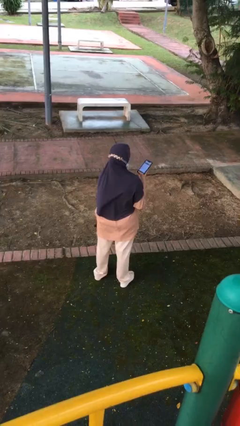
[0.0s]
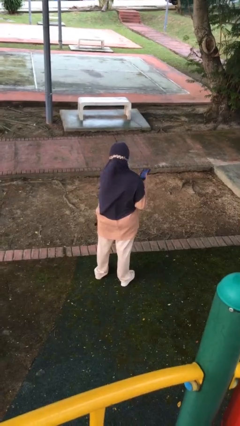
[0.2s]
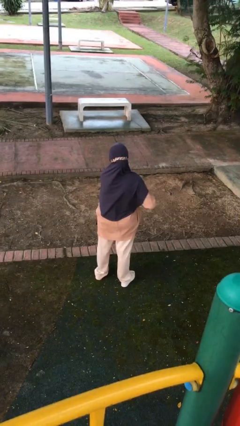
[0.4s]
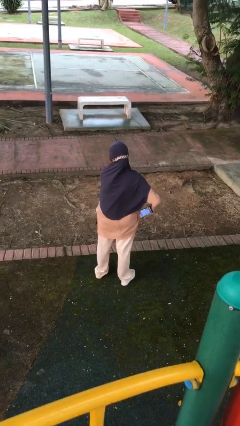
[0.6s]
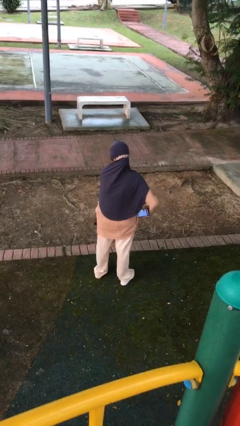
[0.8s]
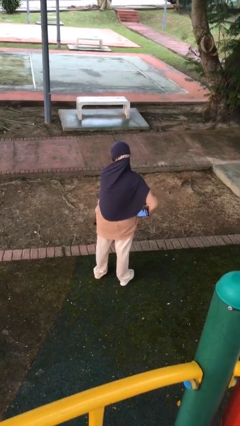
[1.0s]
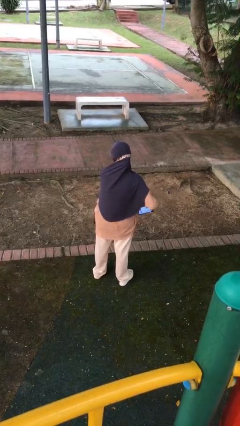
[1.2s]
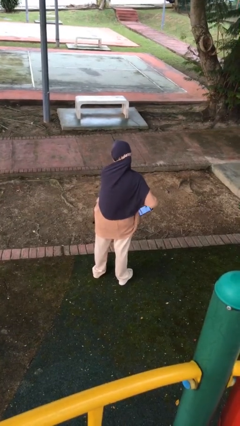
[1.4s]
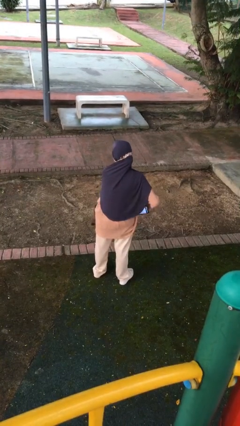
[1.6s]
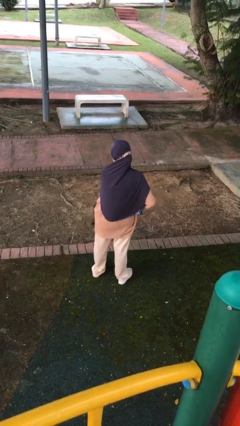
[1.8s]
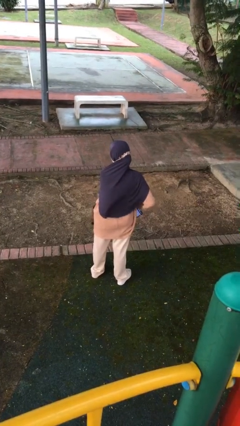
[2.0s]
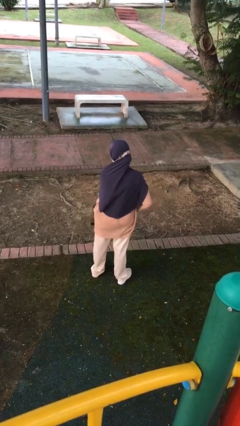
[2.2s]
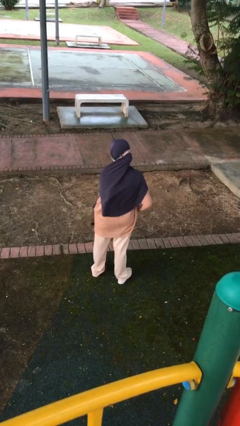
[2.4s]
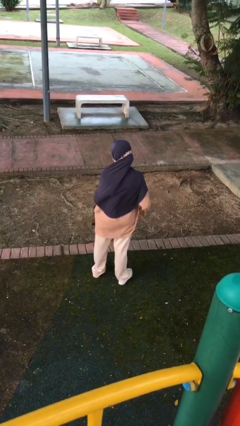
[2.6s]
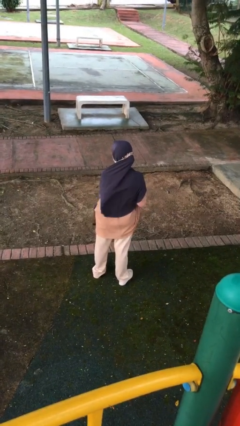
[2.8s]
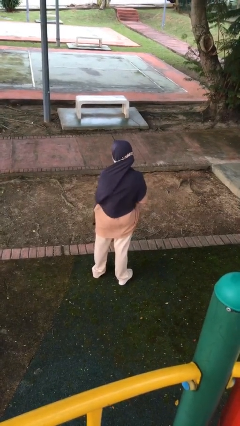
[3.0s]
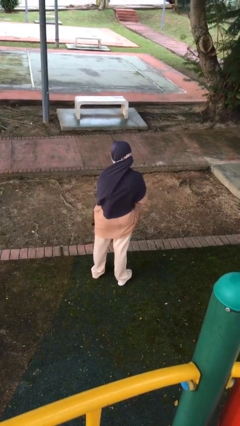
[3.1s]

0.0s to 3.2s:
person puts phone into pocket

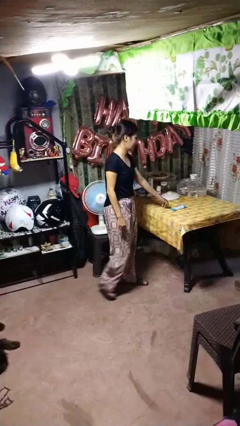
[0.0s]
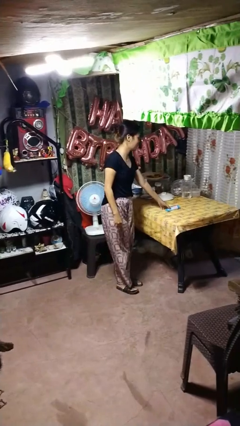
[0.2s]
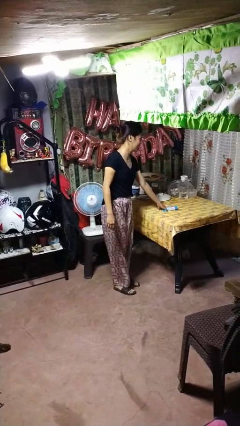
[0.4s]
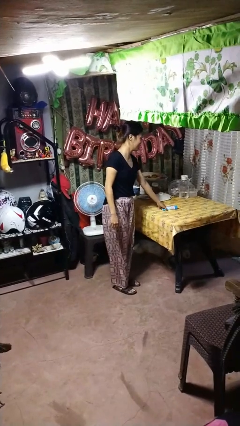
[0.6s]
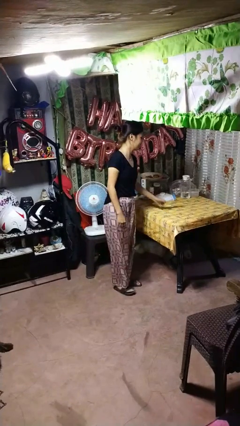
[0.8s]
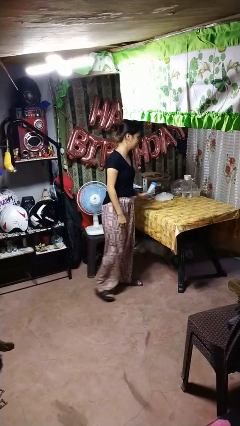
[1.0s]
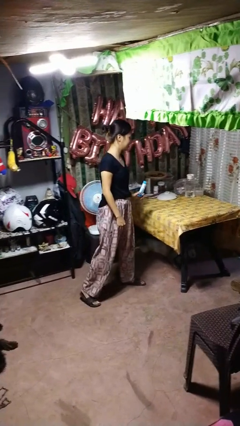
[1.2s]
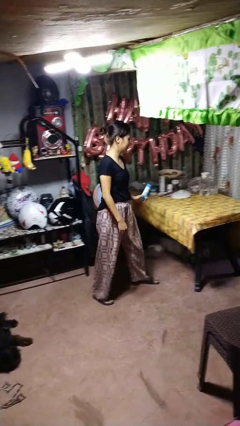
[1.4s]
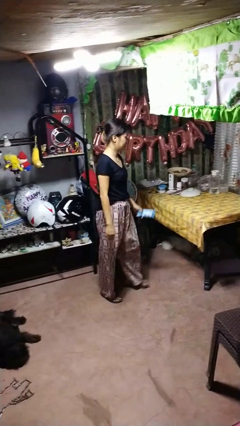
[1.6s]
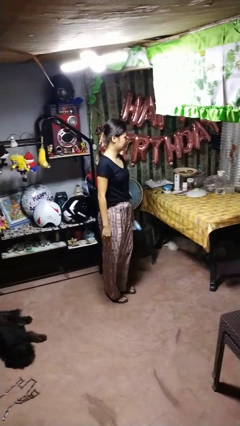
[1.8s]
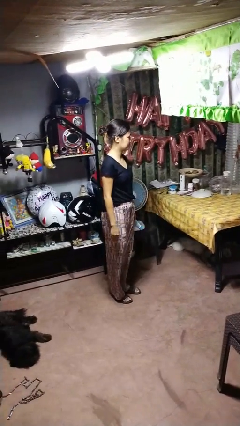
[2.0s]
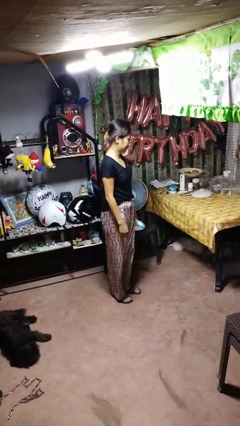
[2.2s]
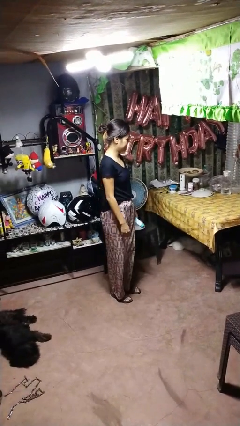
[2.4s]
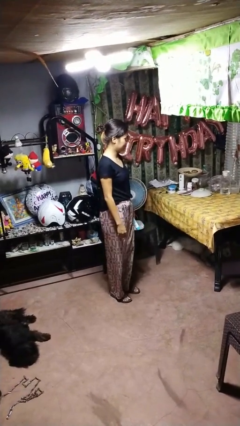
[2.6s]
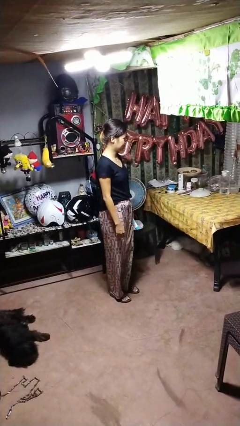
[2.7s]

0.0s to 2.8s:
person picks up object from table

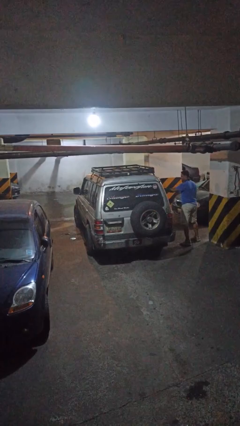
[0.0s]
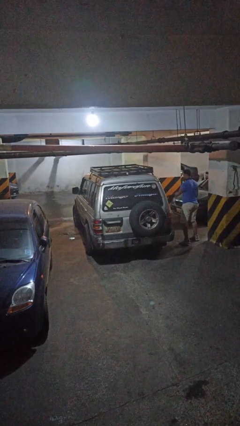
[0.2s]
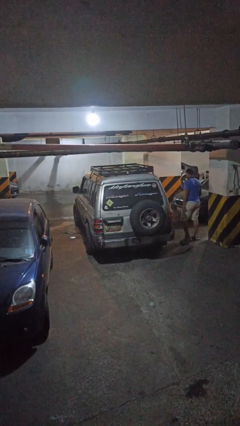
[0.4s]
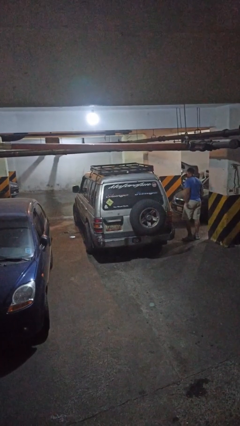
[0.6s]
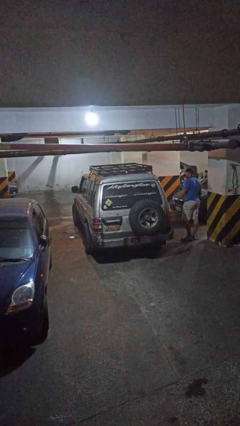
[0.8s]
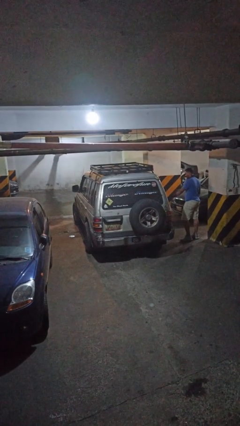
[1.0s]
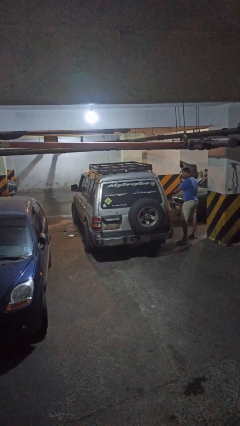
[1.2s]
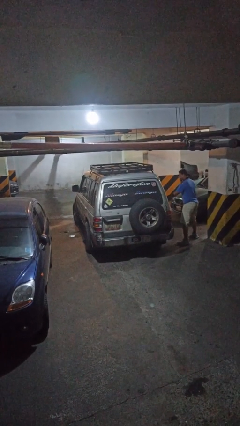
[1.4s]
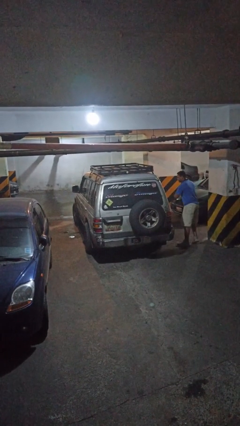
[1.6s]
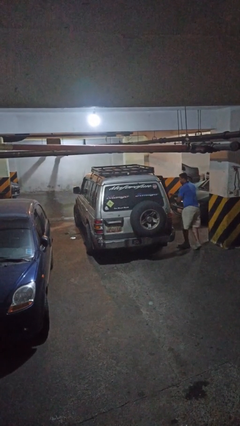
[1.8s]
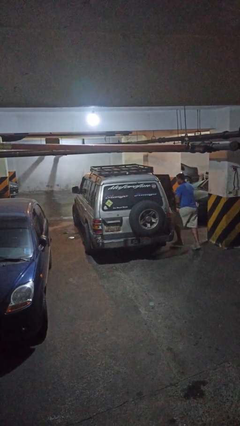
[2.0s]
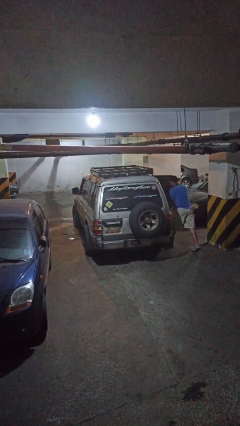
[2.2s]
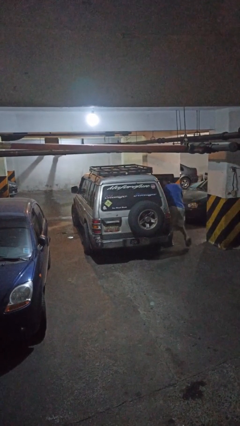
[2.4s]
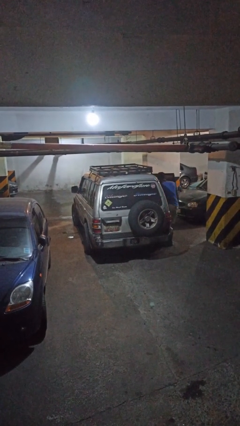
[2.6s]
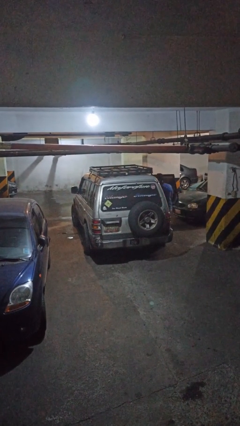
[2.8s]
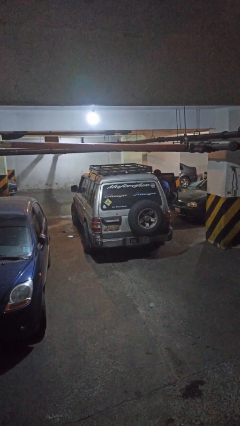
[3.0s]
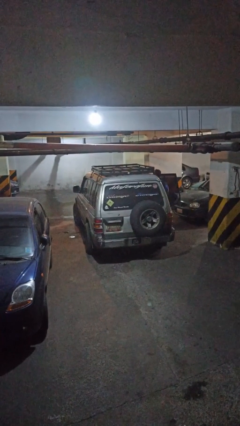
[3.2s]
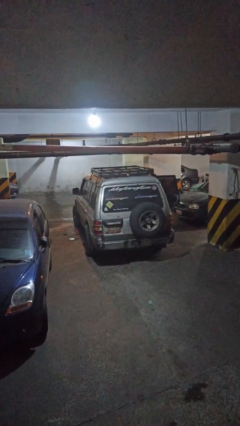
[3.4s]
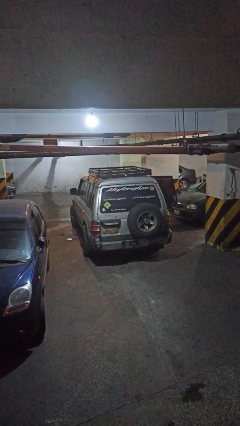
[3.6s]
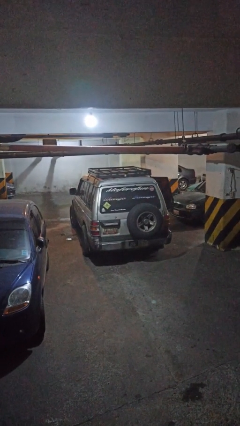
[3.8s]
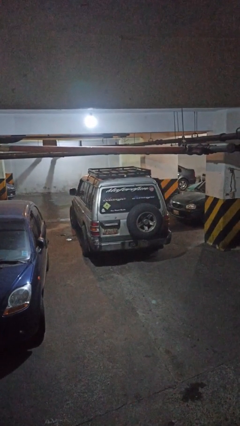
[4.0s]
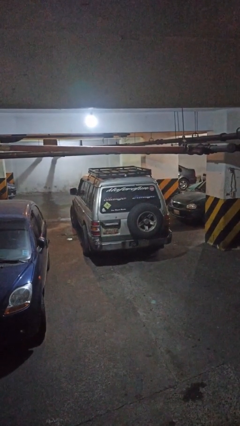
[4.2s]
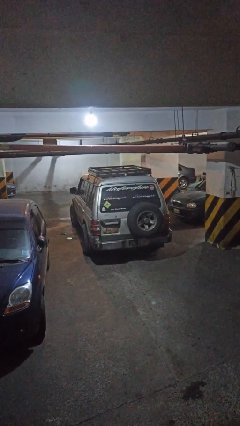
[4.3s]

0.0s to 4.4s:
car picks up person

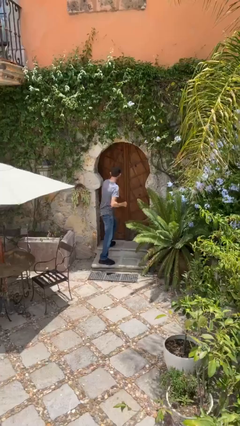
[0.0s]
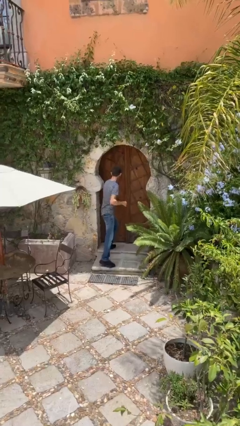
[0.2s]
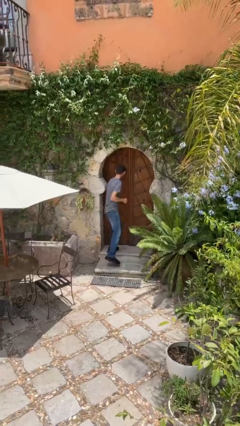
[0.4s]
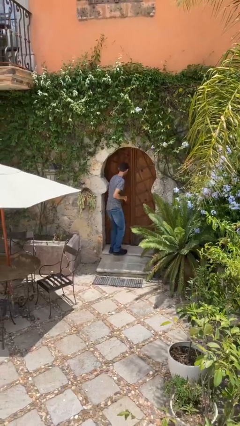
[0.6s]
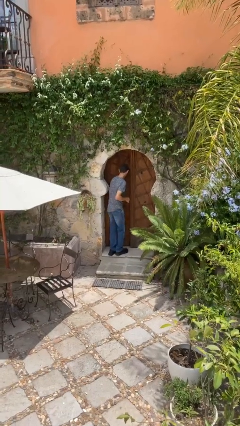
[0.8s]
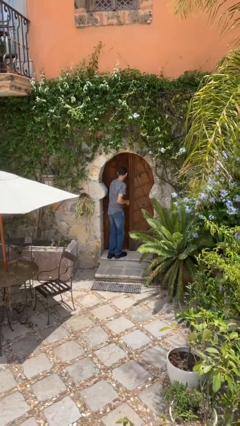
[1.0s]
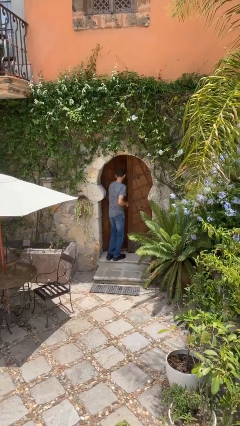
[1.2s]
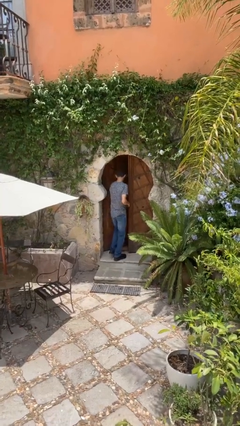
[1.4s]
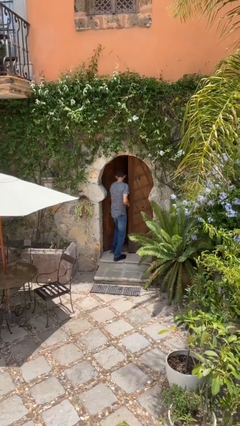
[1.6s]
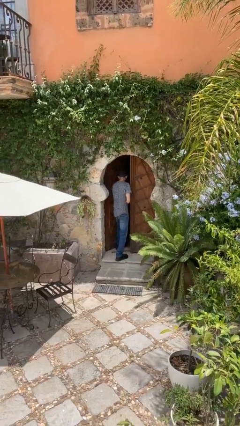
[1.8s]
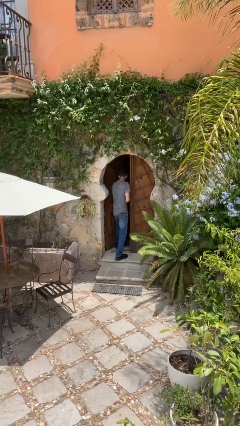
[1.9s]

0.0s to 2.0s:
person opens facility door

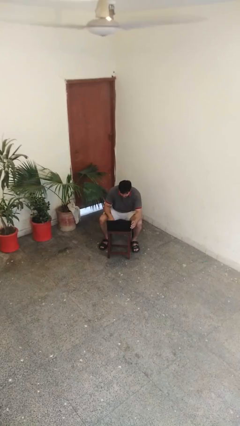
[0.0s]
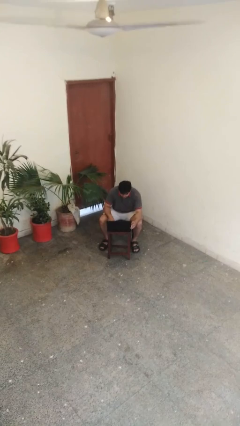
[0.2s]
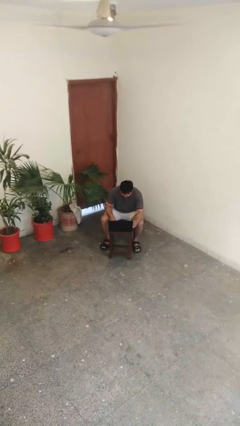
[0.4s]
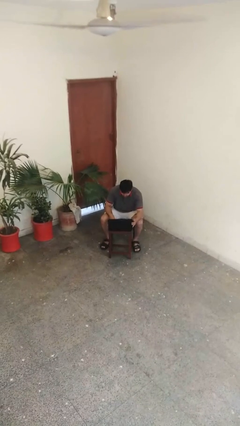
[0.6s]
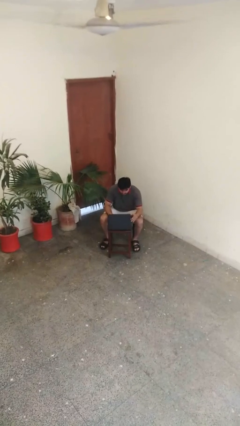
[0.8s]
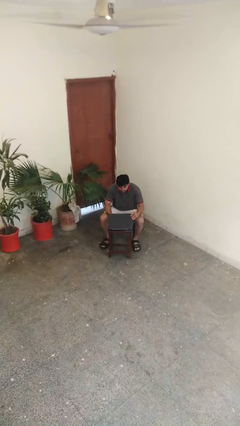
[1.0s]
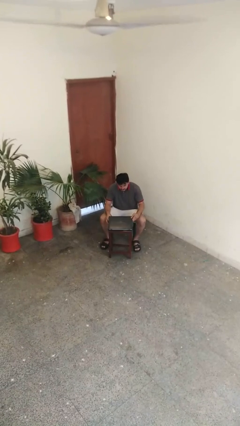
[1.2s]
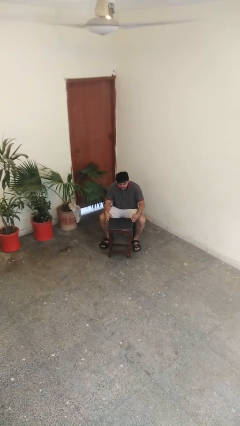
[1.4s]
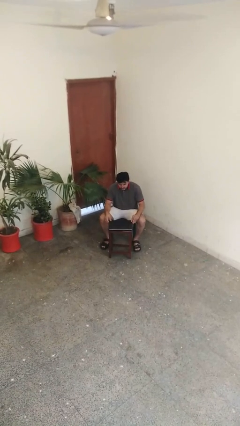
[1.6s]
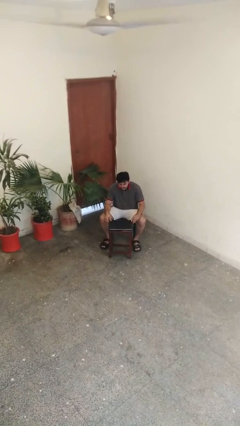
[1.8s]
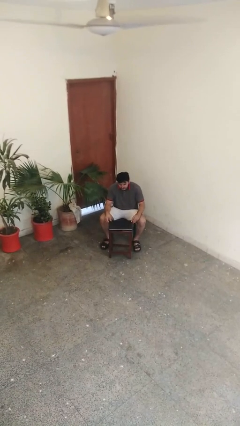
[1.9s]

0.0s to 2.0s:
person closes laptop

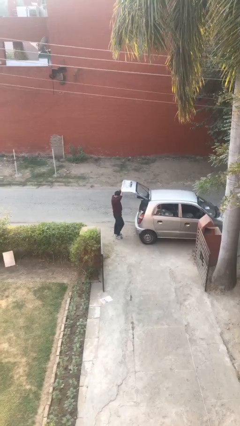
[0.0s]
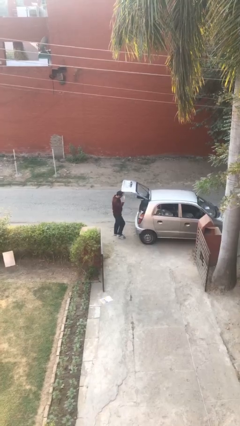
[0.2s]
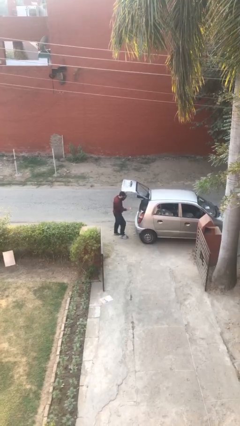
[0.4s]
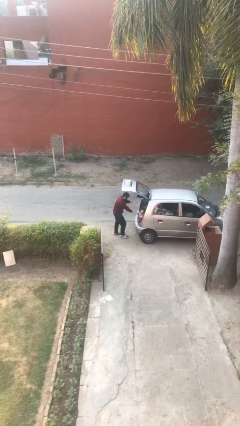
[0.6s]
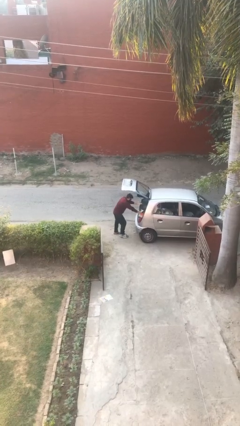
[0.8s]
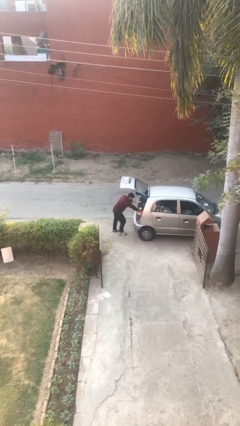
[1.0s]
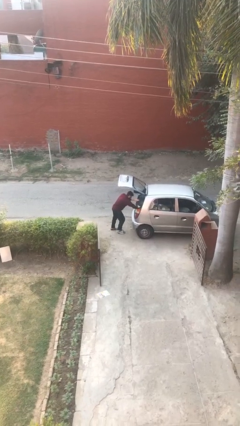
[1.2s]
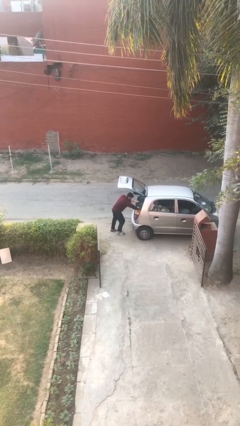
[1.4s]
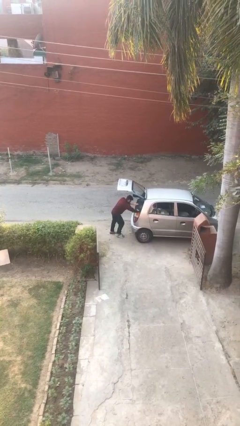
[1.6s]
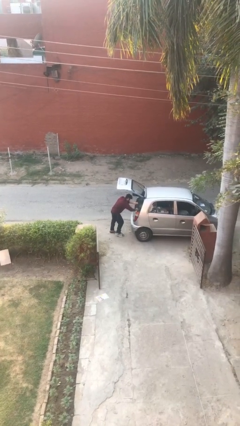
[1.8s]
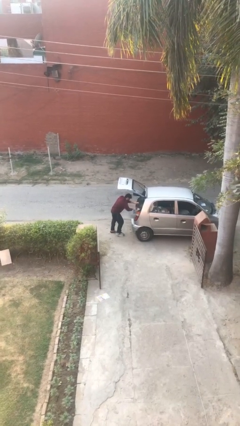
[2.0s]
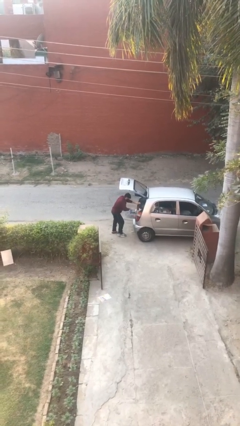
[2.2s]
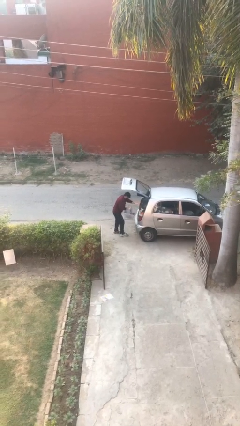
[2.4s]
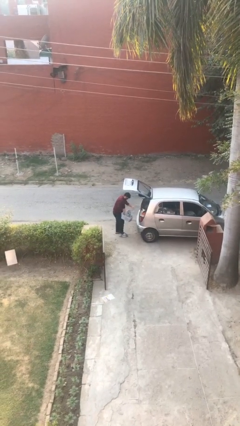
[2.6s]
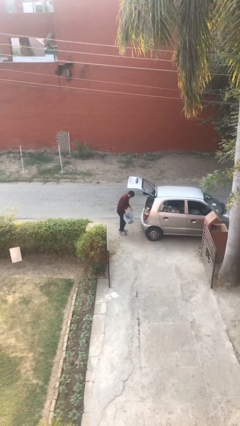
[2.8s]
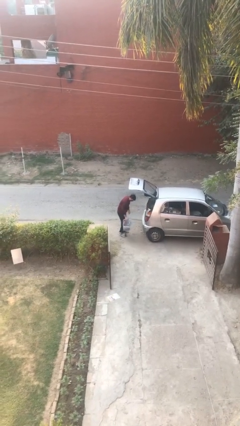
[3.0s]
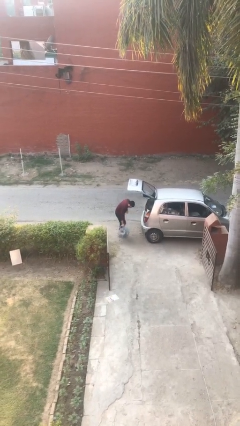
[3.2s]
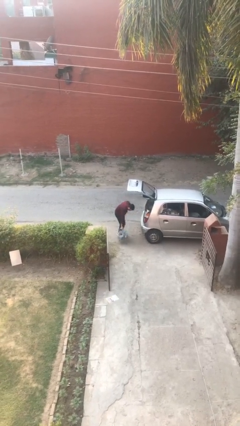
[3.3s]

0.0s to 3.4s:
person unloads car

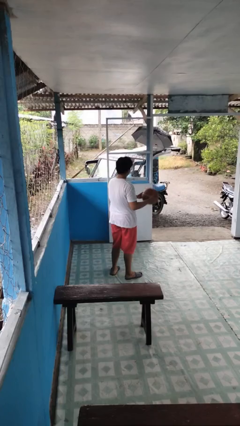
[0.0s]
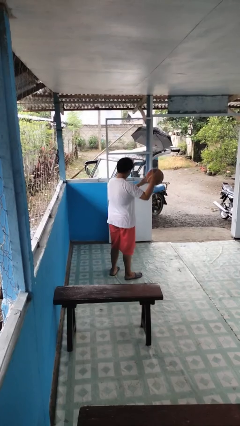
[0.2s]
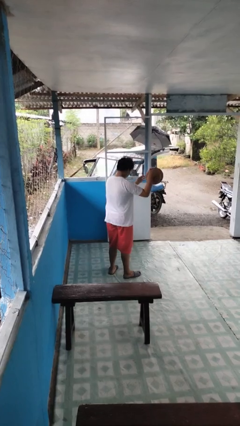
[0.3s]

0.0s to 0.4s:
person bounces ball on floor
